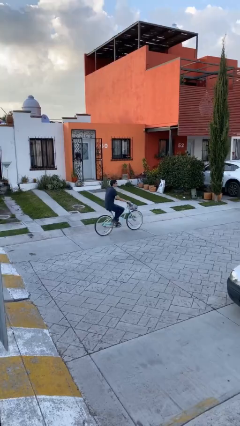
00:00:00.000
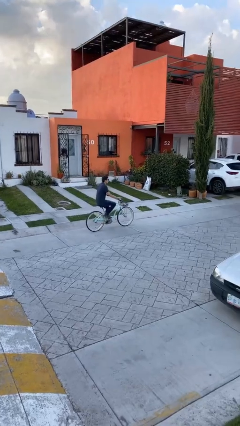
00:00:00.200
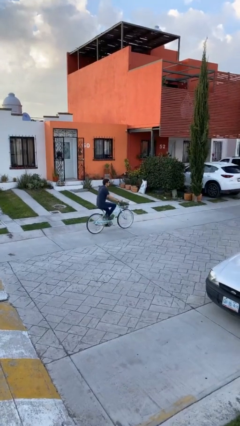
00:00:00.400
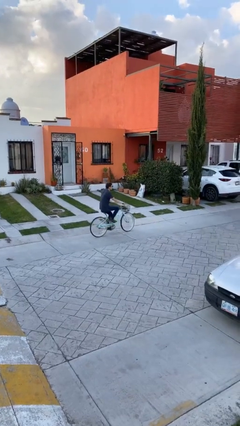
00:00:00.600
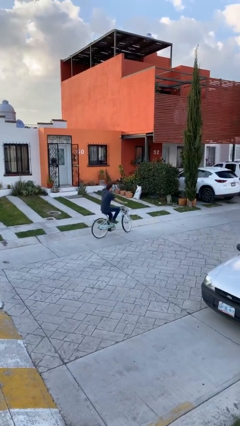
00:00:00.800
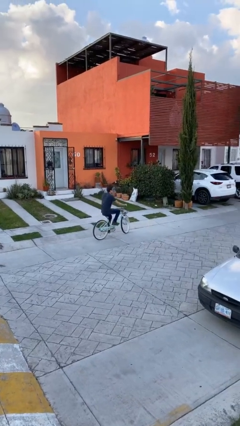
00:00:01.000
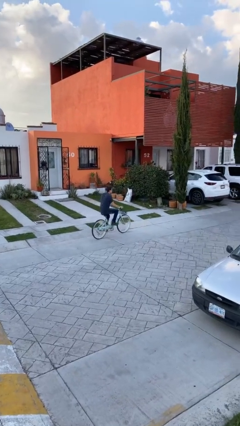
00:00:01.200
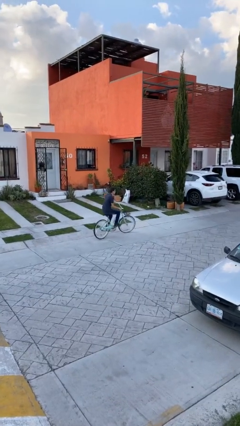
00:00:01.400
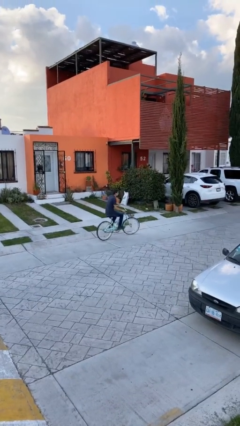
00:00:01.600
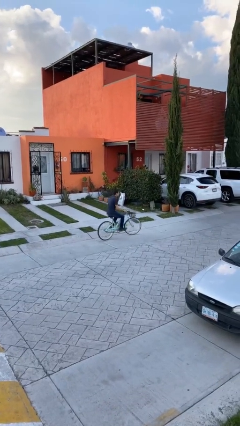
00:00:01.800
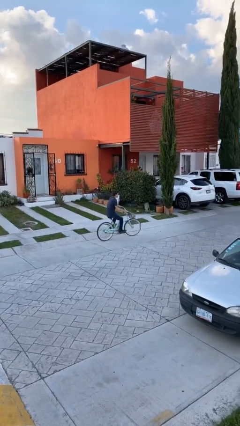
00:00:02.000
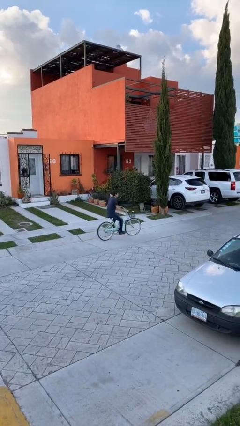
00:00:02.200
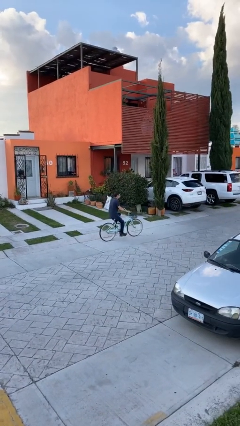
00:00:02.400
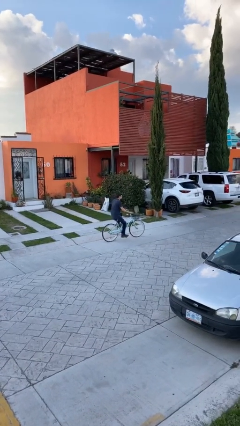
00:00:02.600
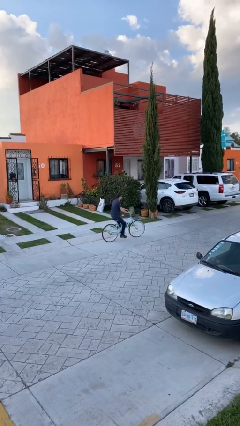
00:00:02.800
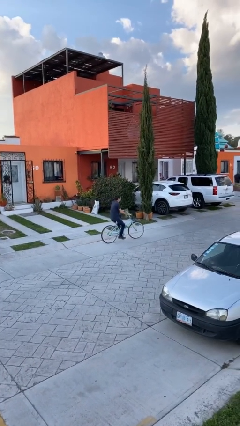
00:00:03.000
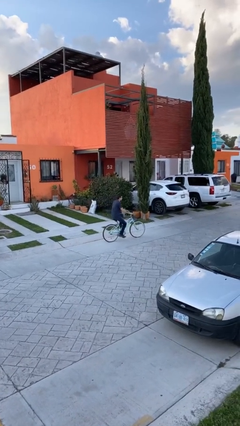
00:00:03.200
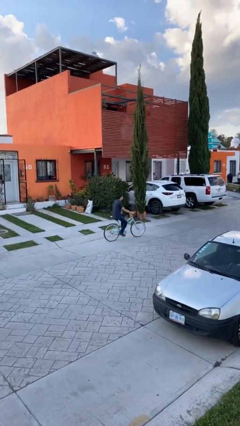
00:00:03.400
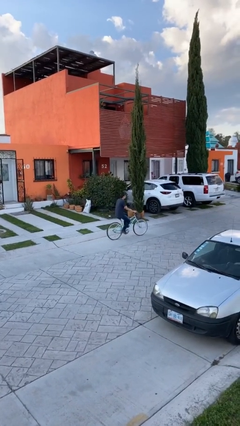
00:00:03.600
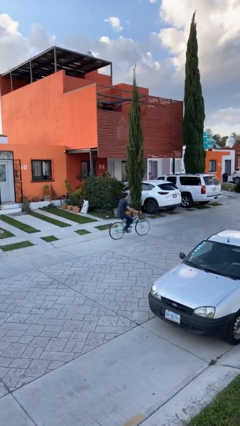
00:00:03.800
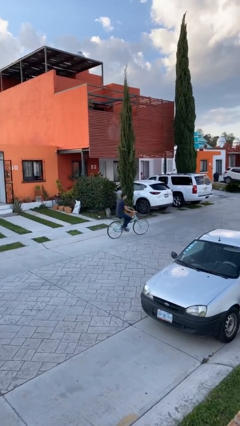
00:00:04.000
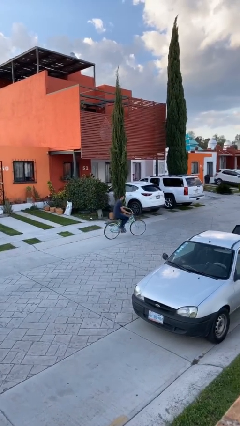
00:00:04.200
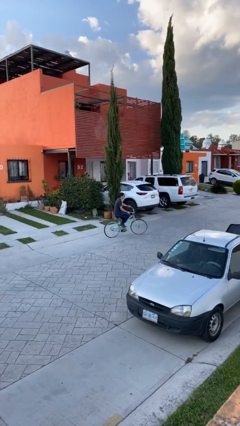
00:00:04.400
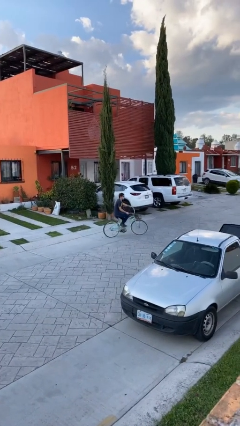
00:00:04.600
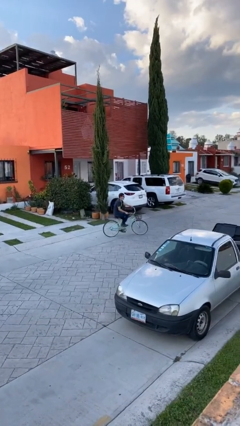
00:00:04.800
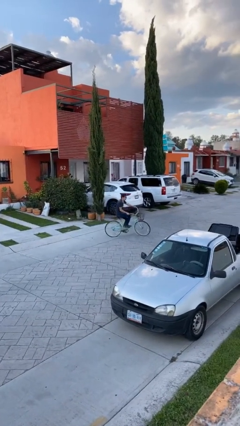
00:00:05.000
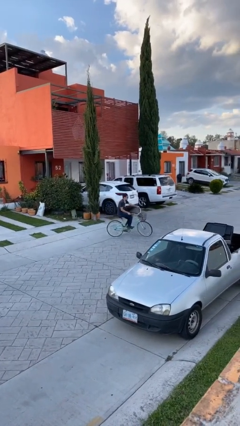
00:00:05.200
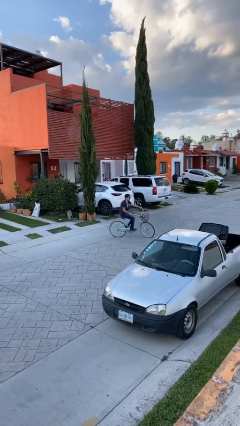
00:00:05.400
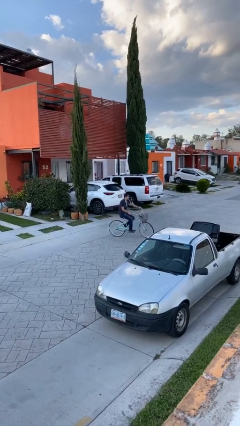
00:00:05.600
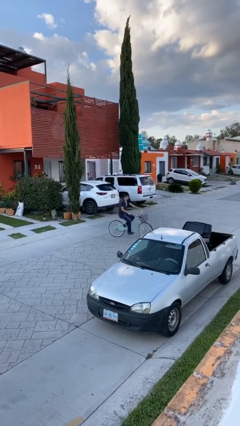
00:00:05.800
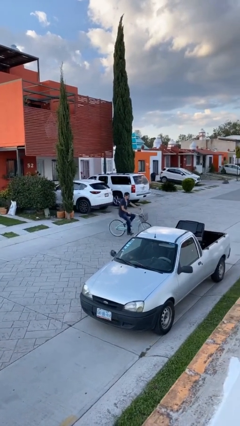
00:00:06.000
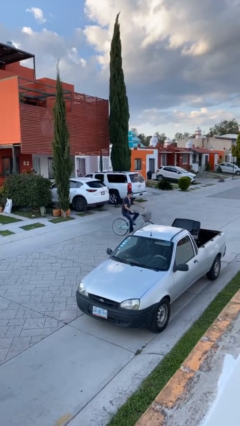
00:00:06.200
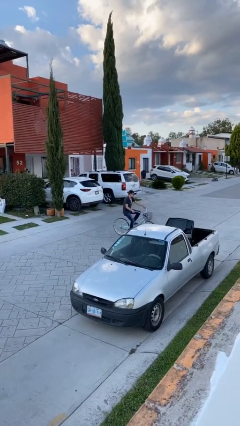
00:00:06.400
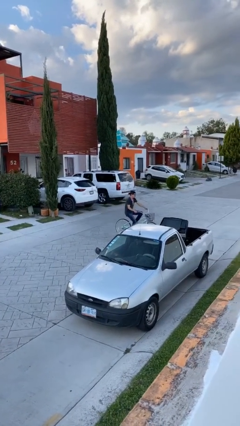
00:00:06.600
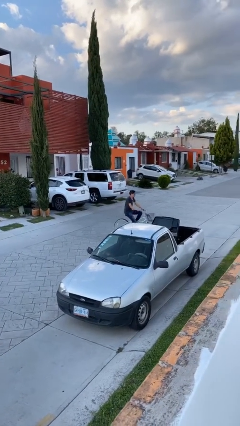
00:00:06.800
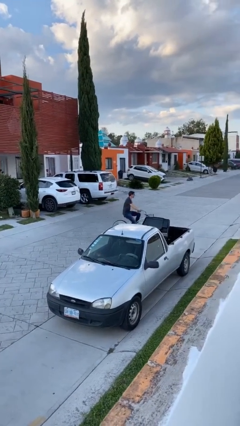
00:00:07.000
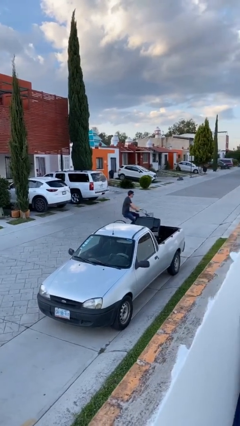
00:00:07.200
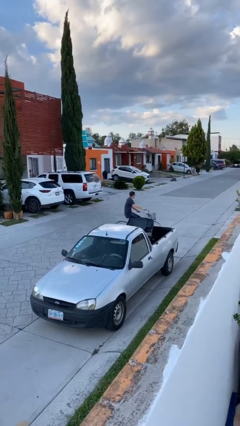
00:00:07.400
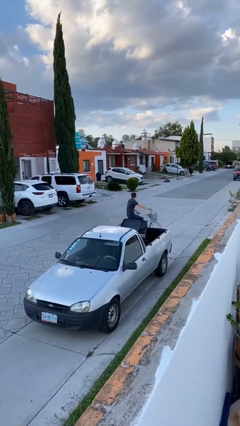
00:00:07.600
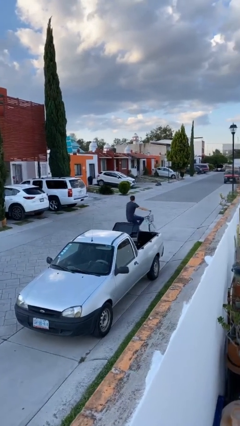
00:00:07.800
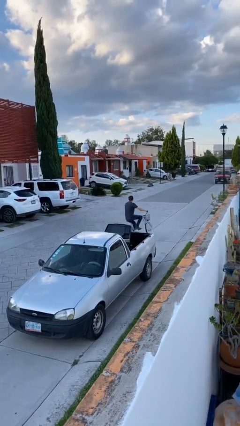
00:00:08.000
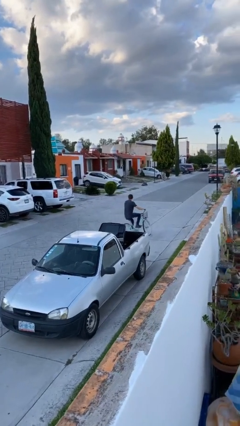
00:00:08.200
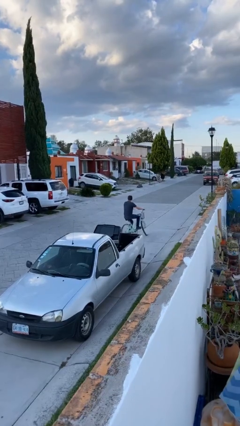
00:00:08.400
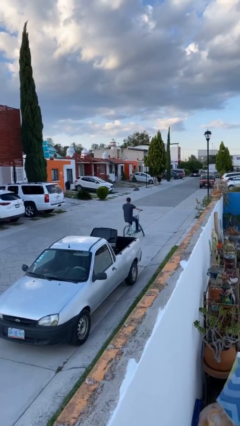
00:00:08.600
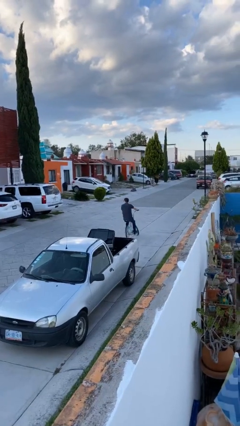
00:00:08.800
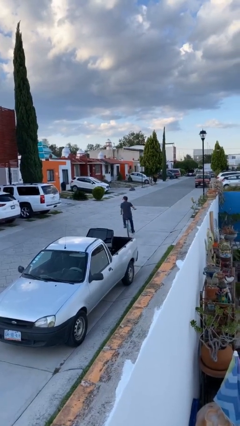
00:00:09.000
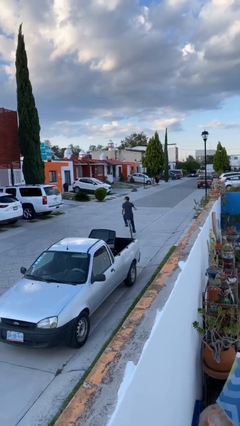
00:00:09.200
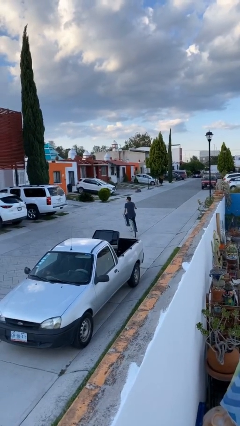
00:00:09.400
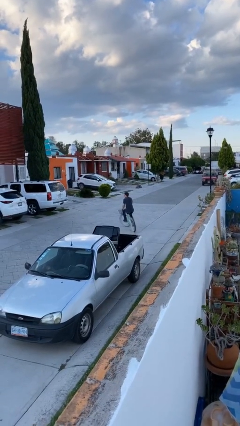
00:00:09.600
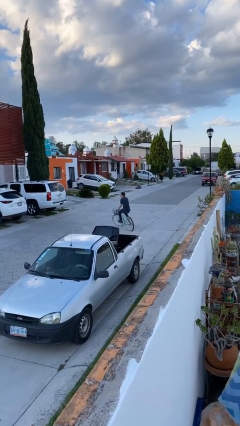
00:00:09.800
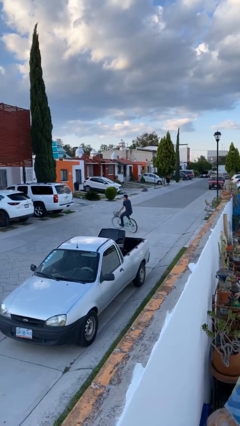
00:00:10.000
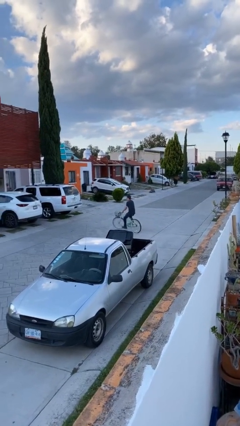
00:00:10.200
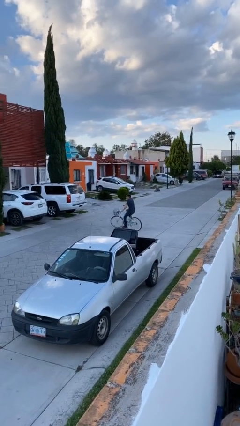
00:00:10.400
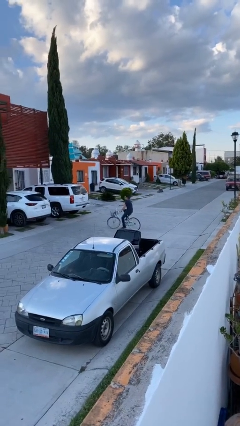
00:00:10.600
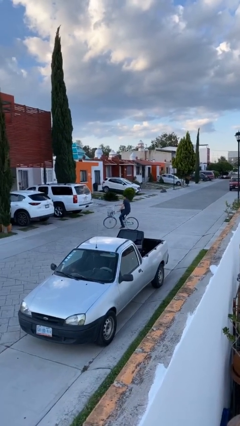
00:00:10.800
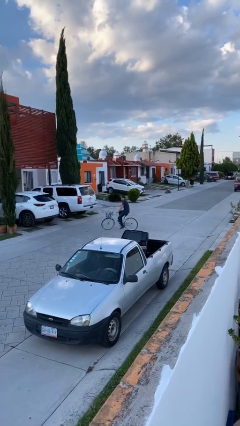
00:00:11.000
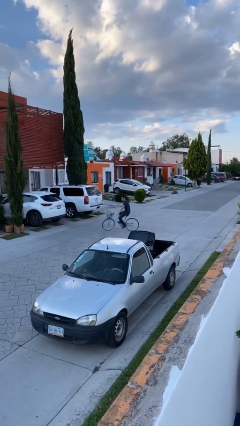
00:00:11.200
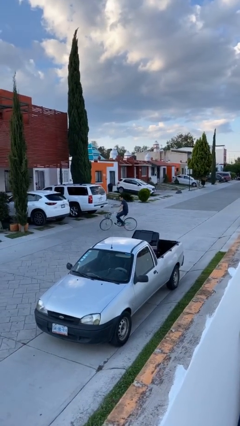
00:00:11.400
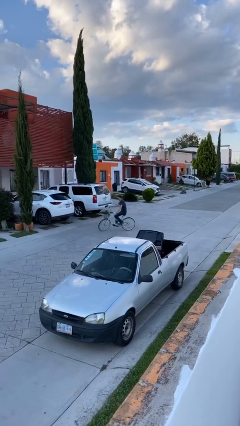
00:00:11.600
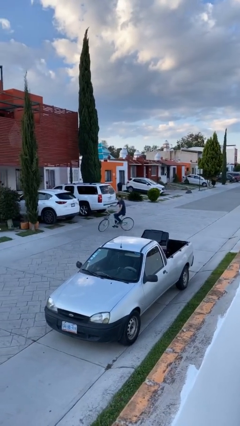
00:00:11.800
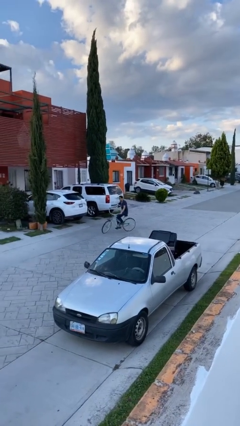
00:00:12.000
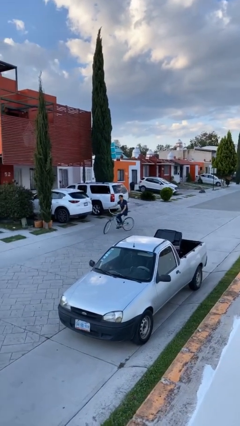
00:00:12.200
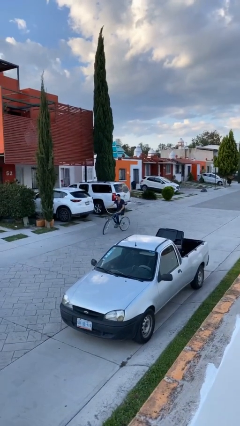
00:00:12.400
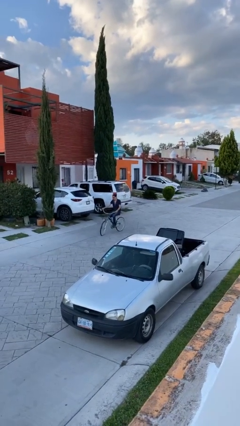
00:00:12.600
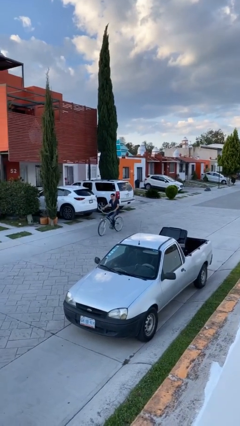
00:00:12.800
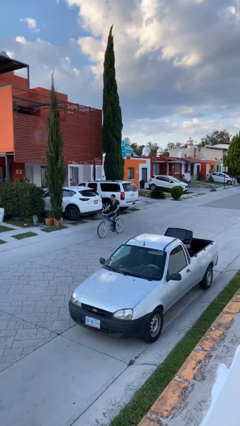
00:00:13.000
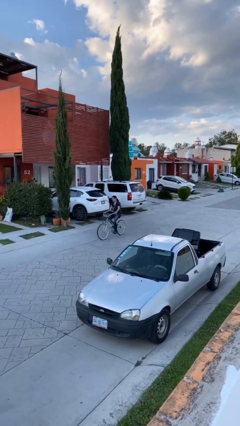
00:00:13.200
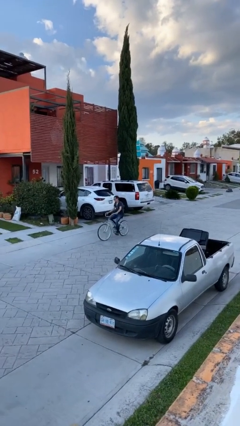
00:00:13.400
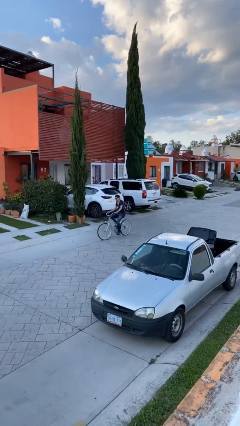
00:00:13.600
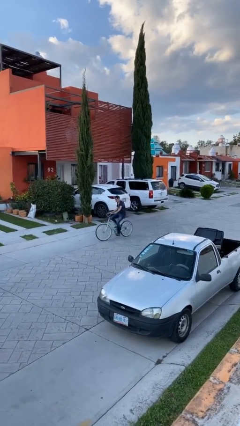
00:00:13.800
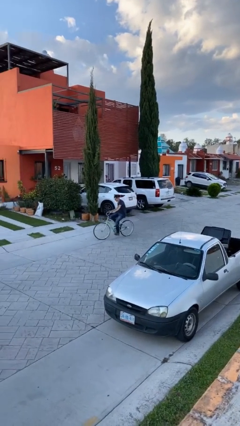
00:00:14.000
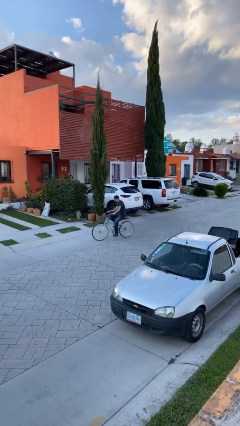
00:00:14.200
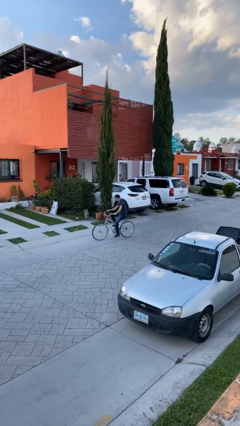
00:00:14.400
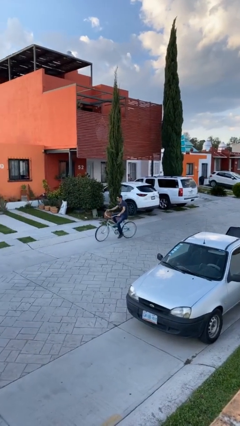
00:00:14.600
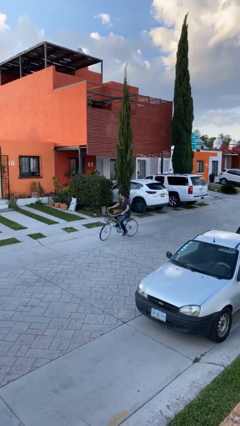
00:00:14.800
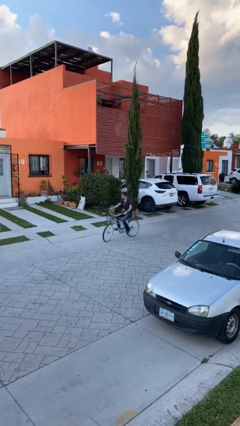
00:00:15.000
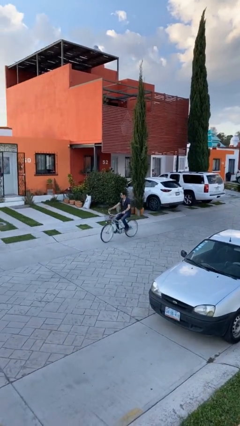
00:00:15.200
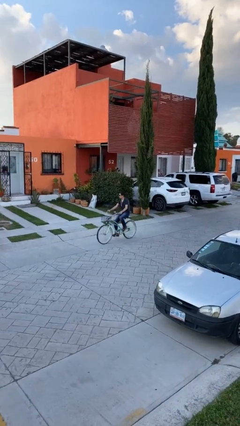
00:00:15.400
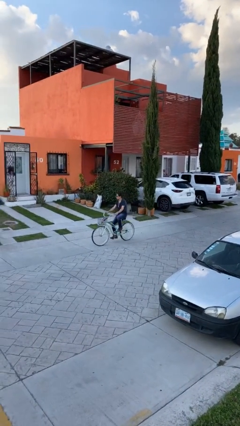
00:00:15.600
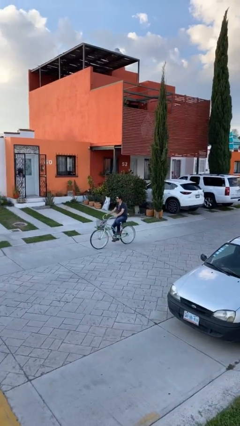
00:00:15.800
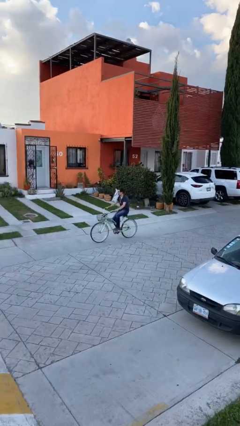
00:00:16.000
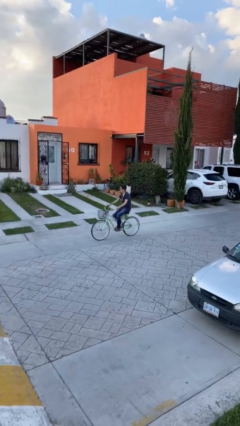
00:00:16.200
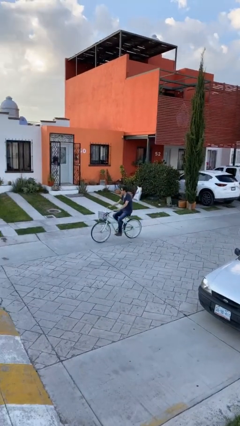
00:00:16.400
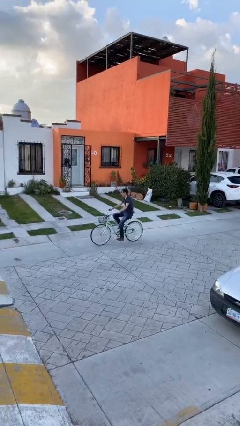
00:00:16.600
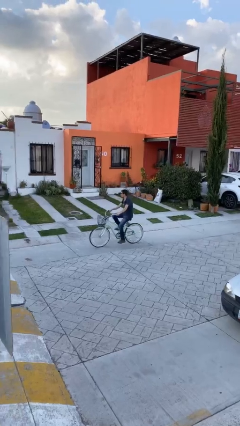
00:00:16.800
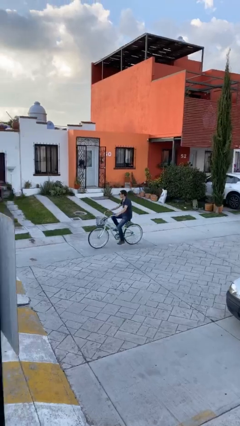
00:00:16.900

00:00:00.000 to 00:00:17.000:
person rides bicycle

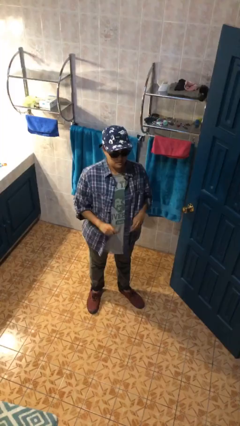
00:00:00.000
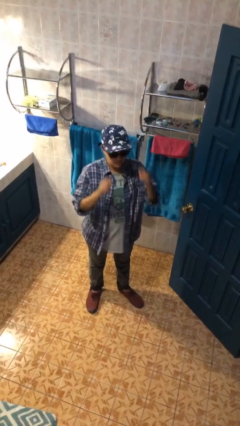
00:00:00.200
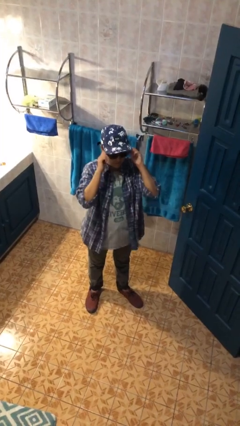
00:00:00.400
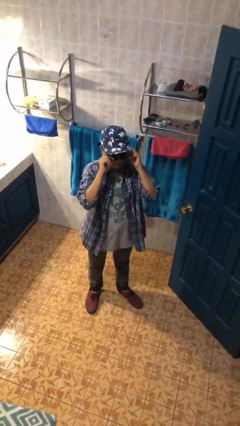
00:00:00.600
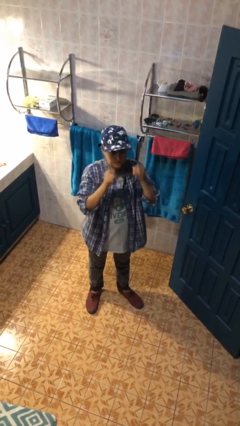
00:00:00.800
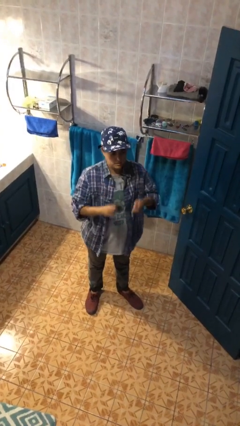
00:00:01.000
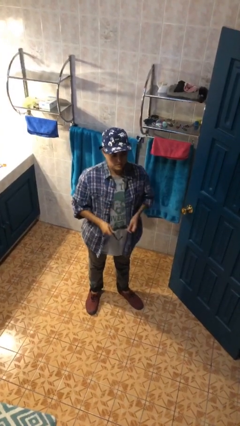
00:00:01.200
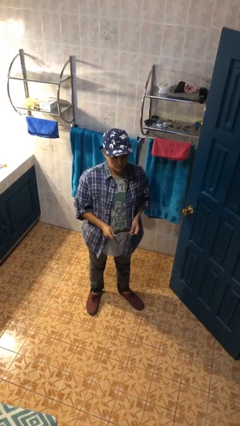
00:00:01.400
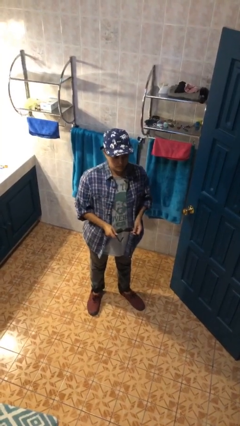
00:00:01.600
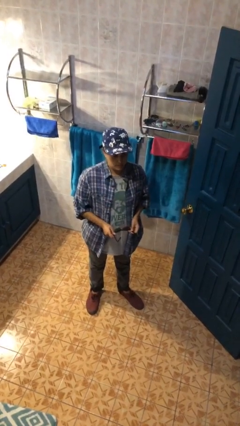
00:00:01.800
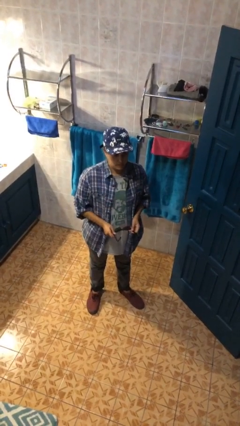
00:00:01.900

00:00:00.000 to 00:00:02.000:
person takes off sunglasses
